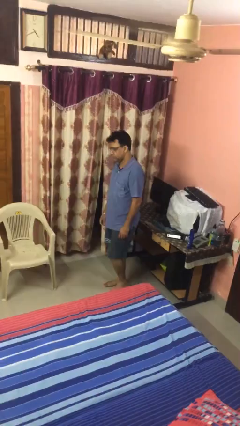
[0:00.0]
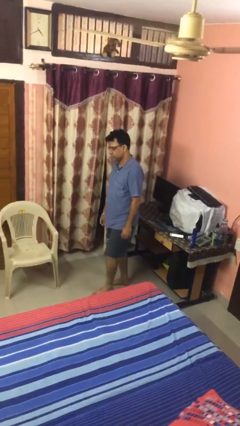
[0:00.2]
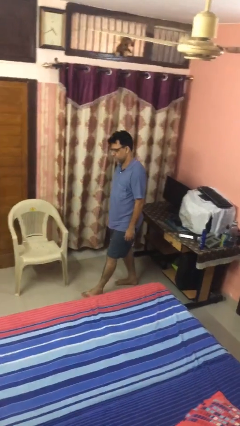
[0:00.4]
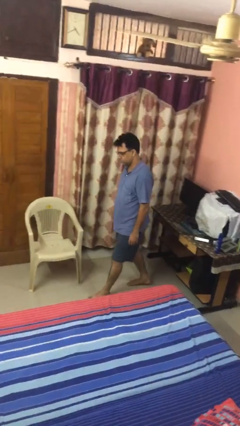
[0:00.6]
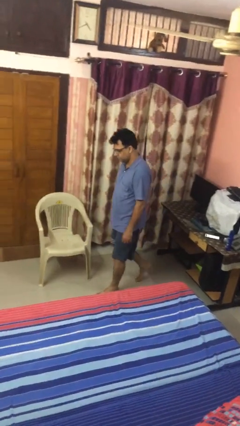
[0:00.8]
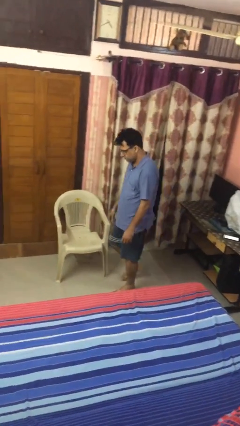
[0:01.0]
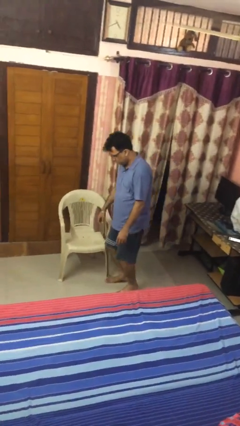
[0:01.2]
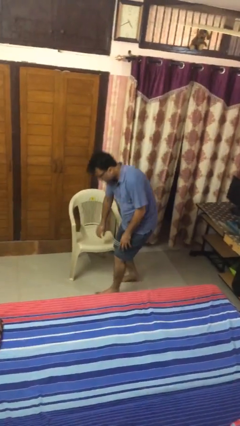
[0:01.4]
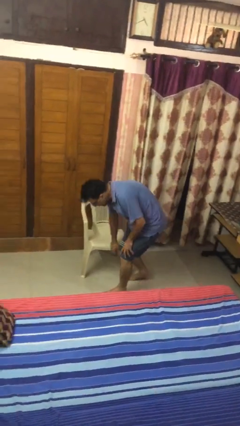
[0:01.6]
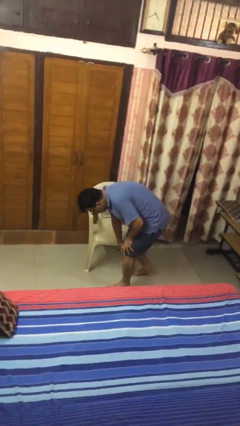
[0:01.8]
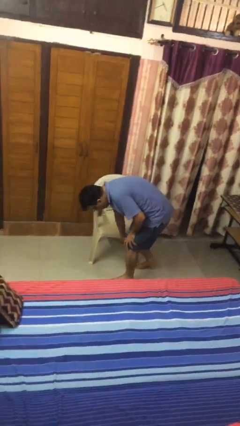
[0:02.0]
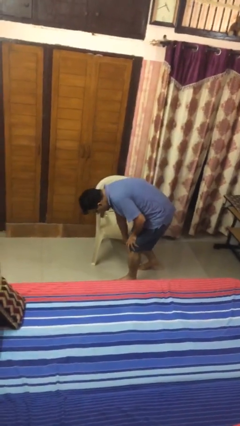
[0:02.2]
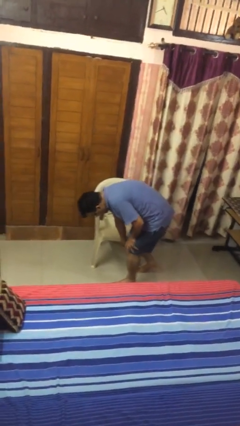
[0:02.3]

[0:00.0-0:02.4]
person stubs toe

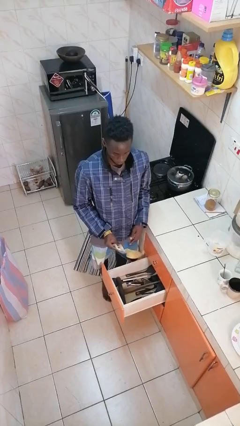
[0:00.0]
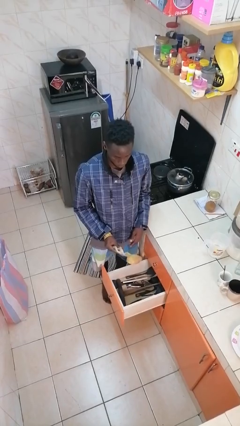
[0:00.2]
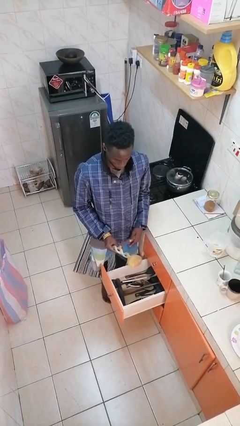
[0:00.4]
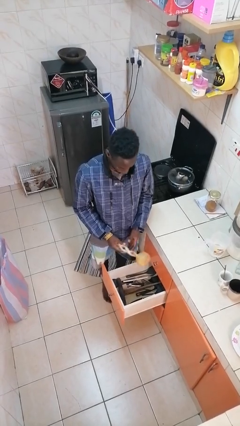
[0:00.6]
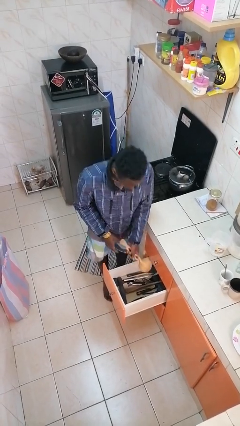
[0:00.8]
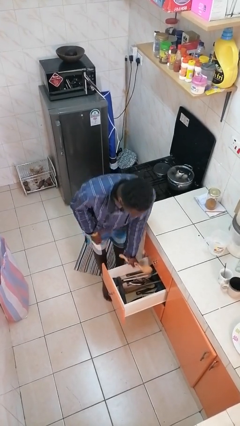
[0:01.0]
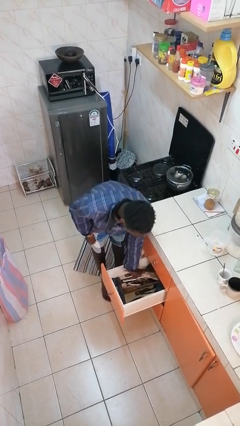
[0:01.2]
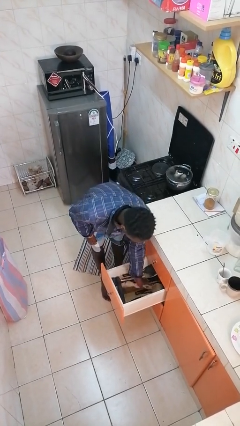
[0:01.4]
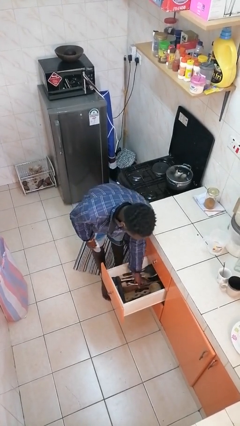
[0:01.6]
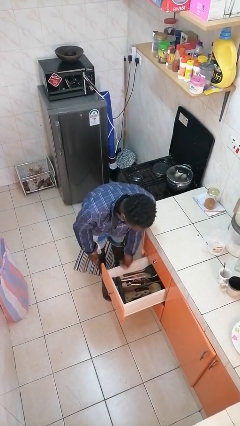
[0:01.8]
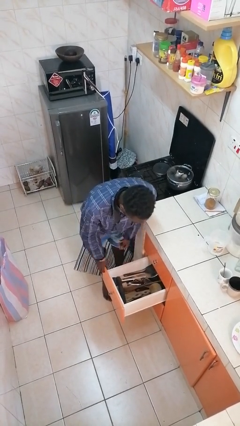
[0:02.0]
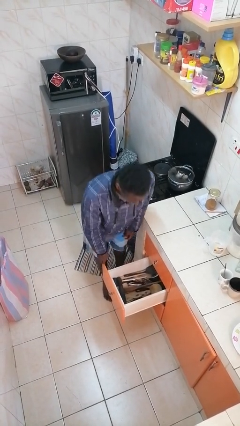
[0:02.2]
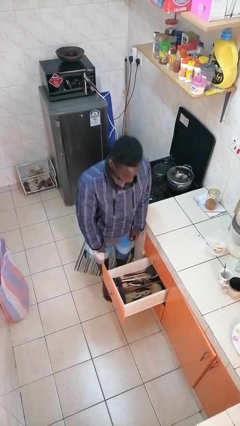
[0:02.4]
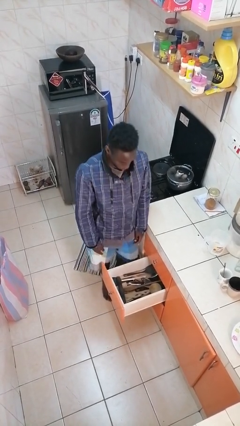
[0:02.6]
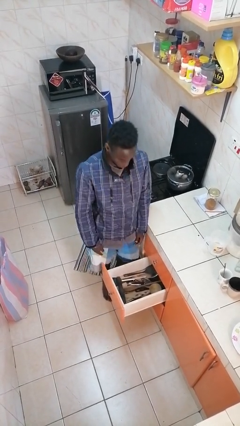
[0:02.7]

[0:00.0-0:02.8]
person puts object into kitchen drawer

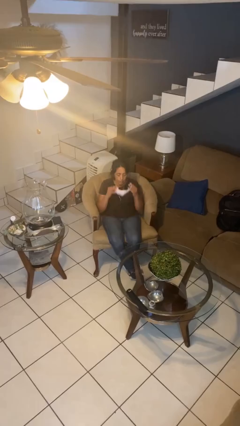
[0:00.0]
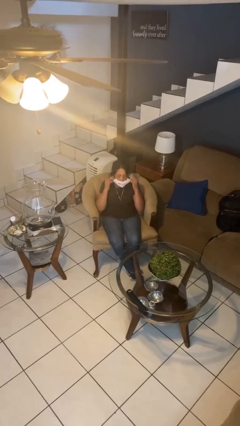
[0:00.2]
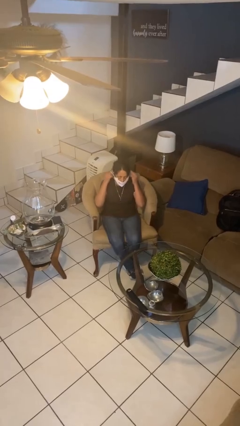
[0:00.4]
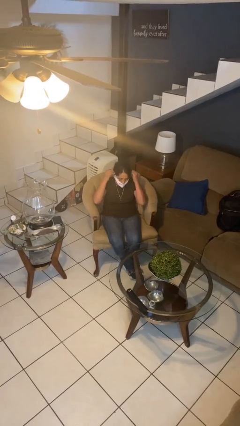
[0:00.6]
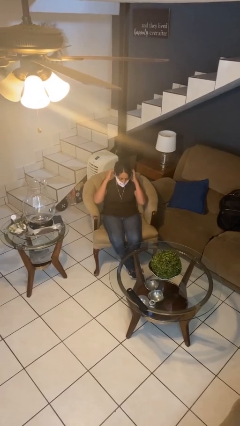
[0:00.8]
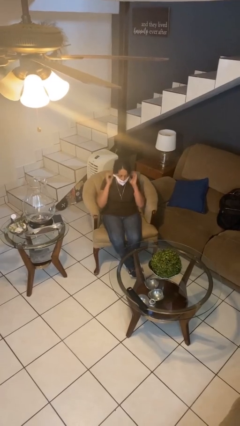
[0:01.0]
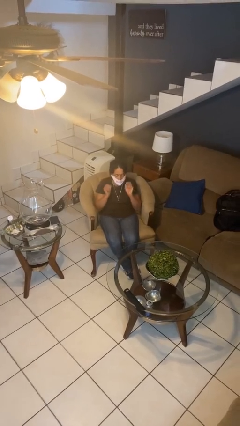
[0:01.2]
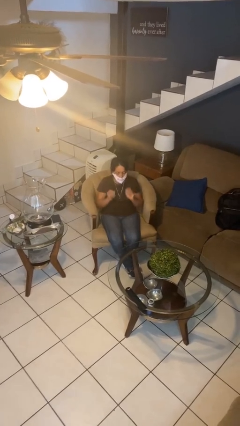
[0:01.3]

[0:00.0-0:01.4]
person puts on facemask

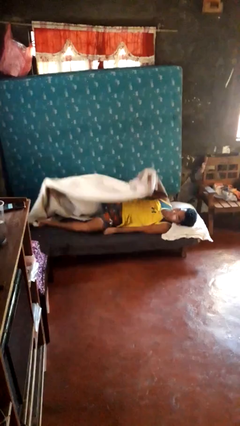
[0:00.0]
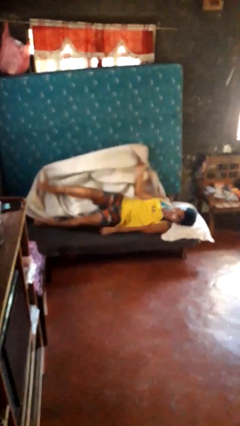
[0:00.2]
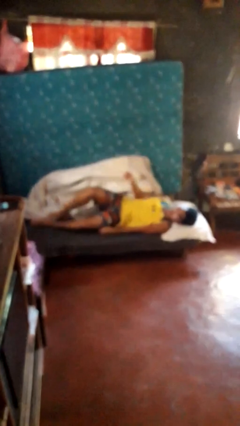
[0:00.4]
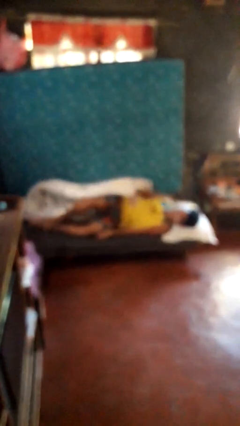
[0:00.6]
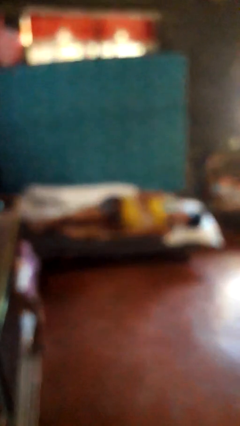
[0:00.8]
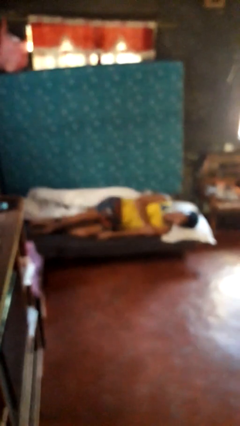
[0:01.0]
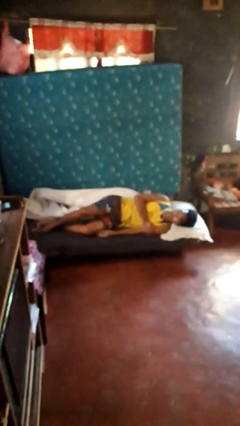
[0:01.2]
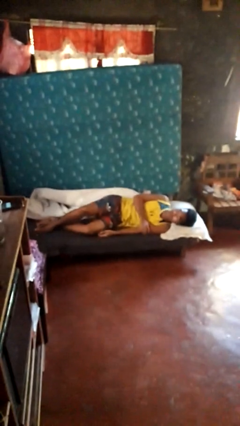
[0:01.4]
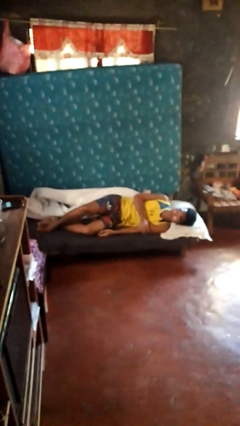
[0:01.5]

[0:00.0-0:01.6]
person uncovers with bedsheets

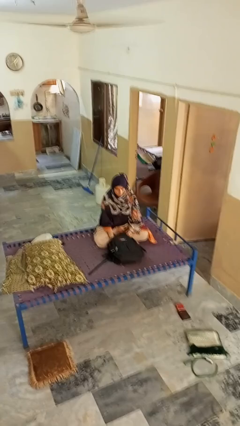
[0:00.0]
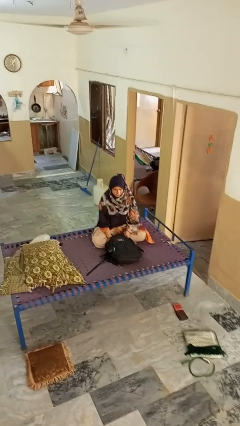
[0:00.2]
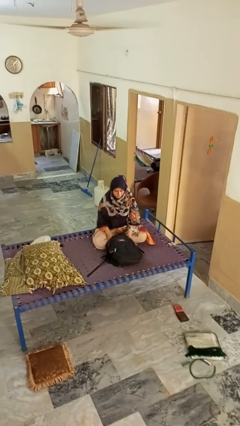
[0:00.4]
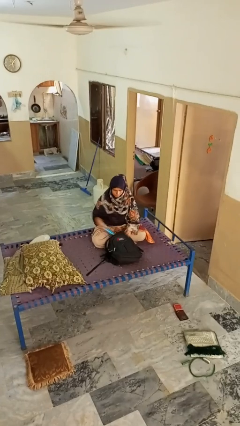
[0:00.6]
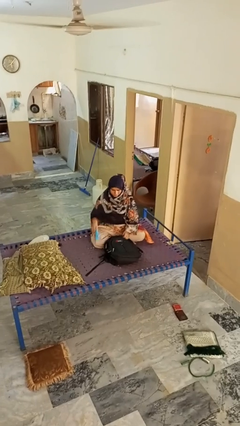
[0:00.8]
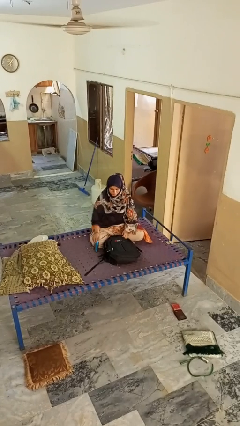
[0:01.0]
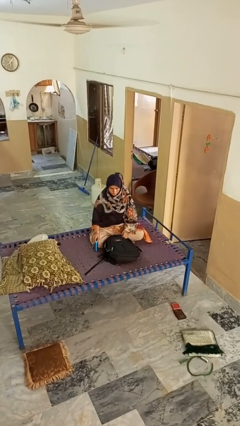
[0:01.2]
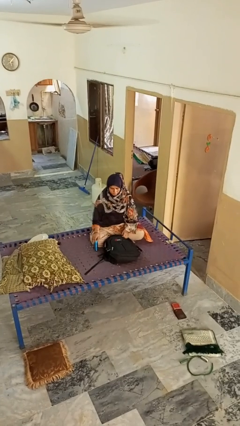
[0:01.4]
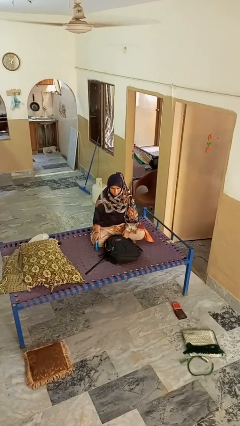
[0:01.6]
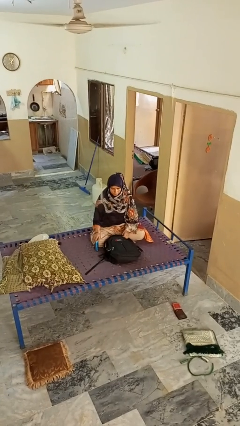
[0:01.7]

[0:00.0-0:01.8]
person takes object from bag

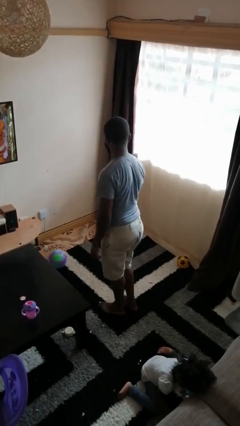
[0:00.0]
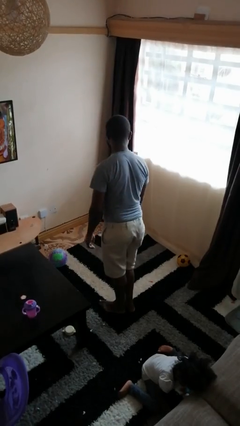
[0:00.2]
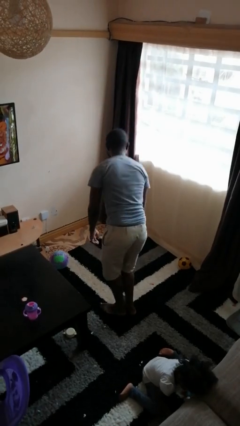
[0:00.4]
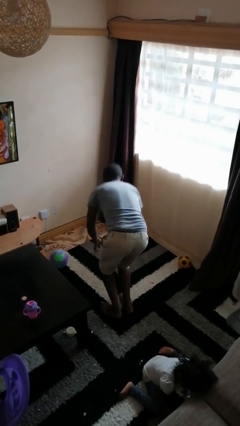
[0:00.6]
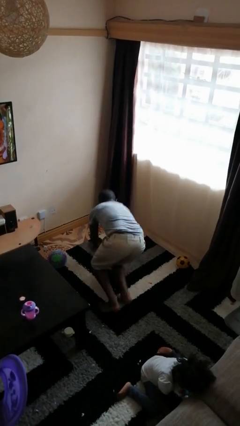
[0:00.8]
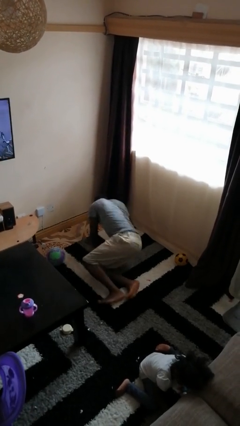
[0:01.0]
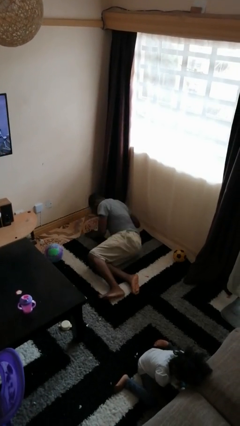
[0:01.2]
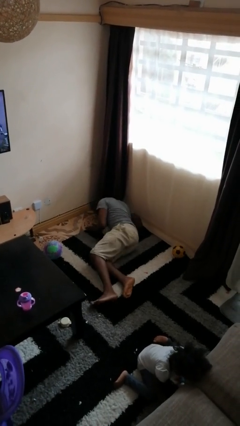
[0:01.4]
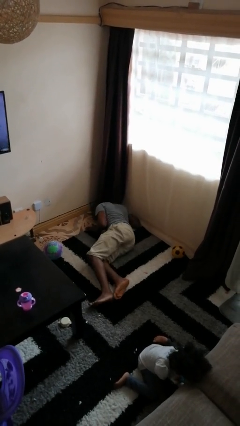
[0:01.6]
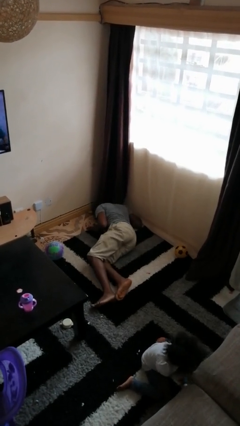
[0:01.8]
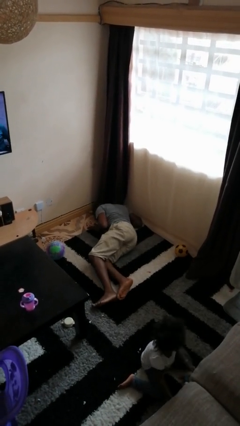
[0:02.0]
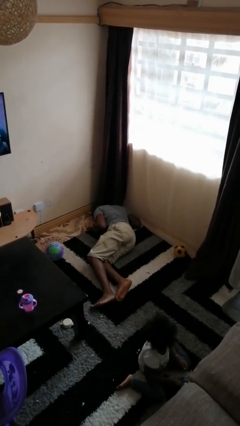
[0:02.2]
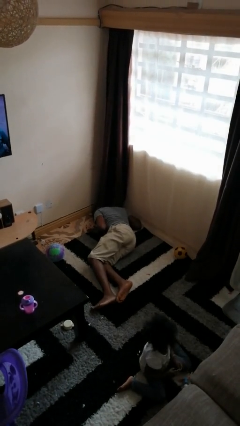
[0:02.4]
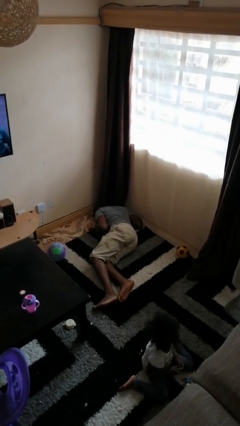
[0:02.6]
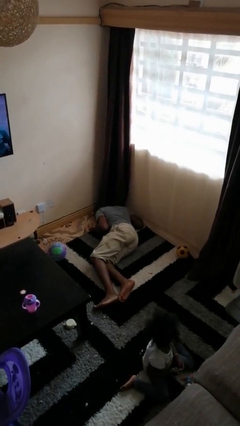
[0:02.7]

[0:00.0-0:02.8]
person falls while standing

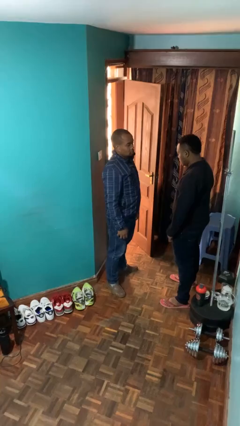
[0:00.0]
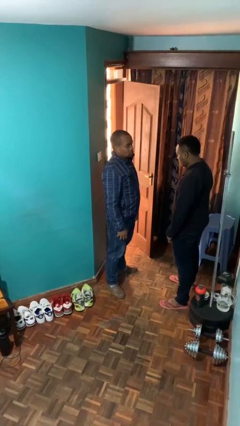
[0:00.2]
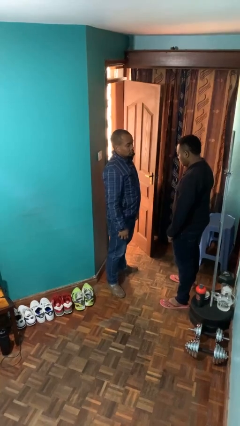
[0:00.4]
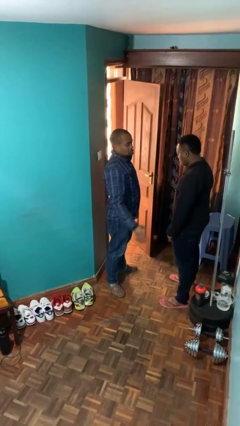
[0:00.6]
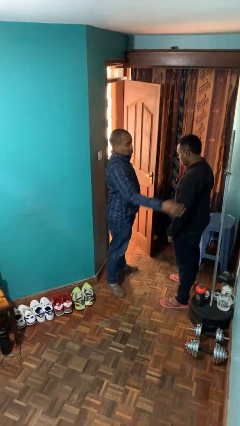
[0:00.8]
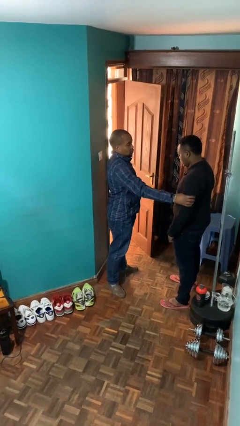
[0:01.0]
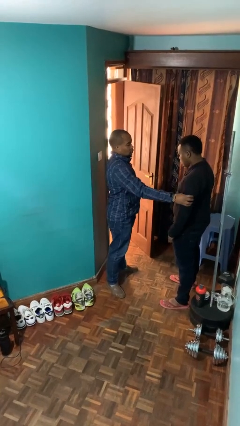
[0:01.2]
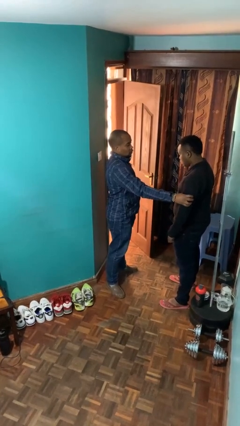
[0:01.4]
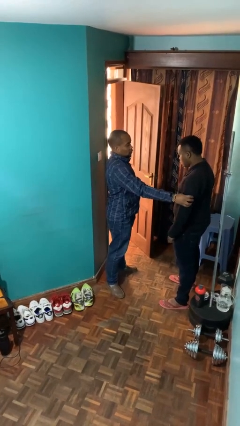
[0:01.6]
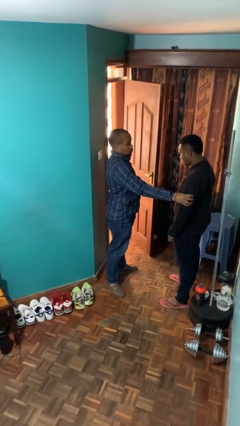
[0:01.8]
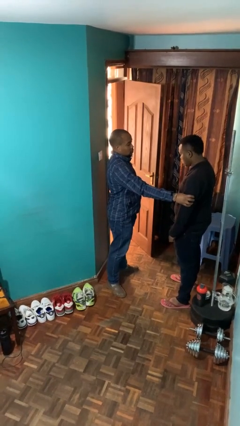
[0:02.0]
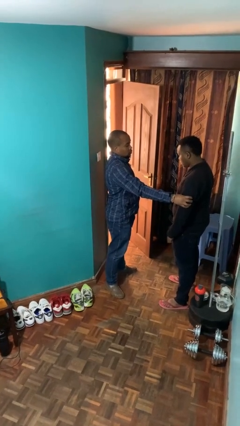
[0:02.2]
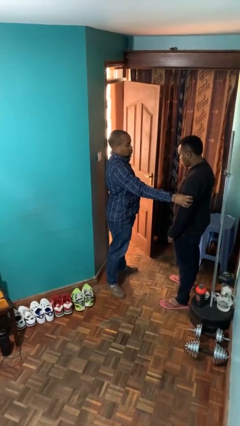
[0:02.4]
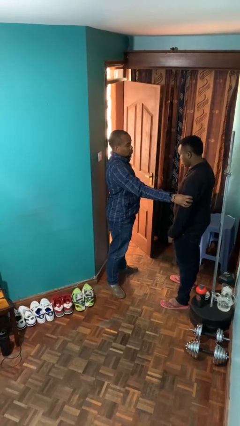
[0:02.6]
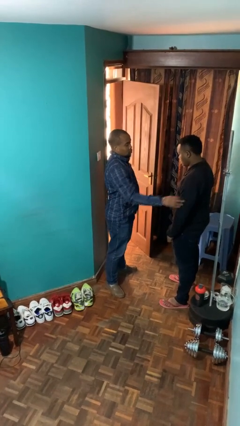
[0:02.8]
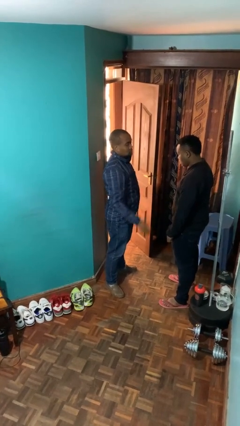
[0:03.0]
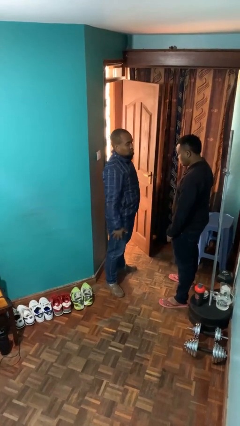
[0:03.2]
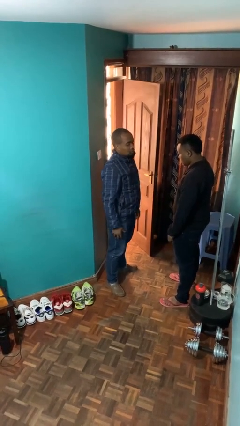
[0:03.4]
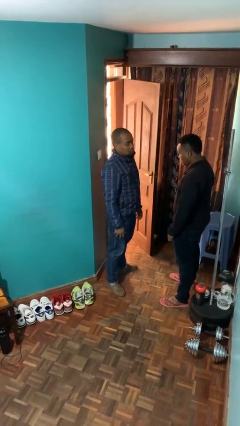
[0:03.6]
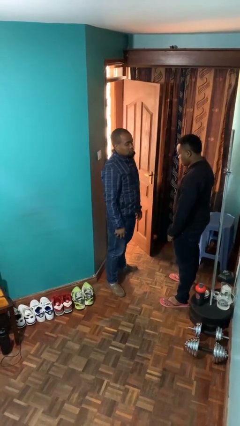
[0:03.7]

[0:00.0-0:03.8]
person grabs person by bicep

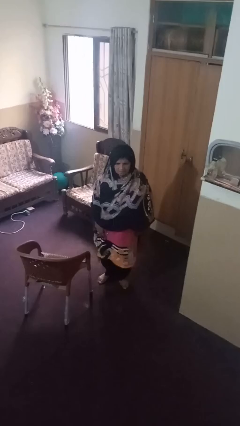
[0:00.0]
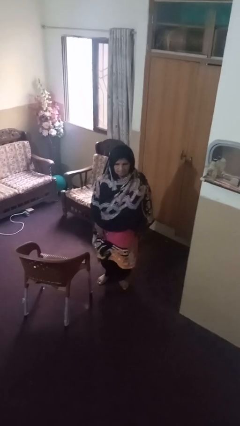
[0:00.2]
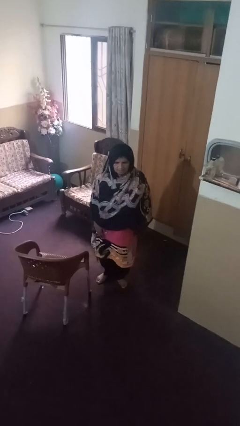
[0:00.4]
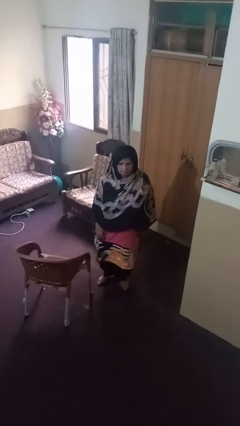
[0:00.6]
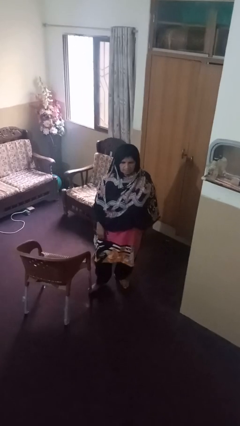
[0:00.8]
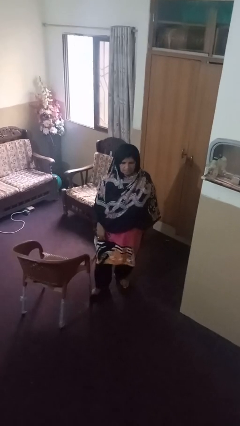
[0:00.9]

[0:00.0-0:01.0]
person trips on object on floor
